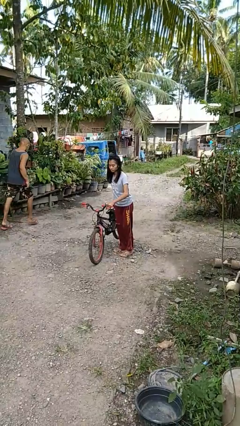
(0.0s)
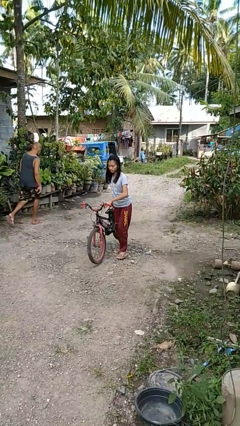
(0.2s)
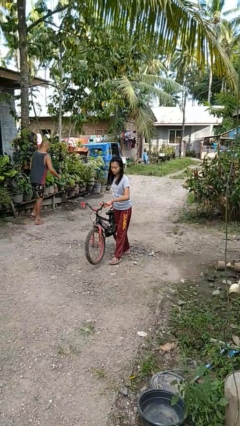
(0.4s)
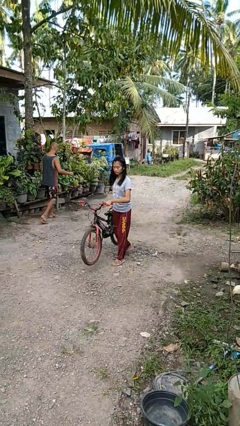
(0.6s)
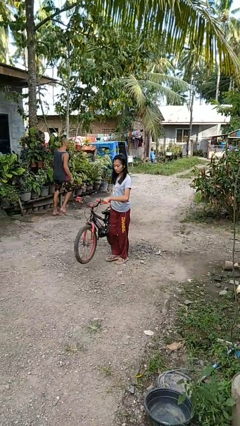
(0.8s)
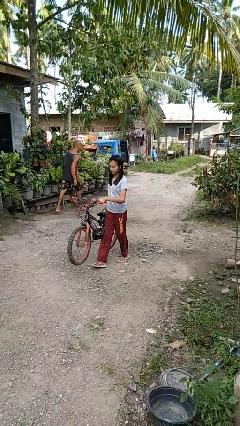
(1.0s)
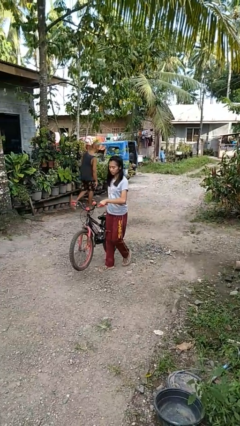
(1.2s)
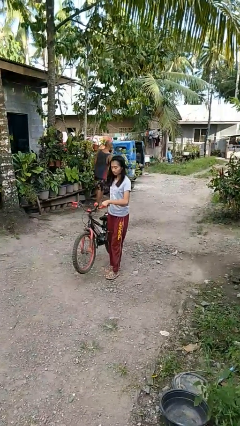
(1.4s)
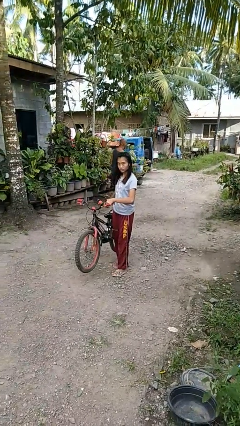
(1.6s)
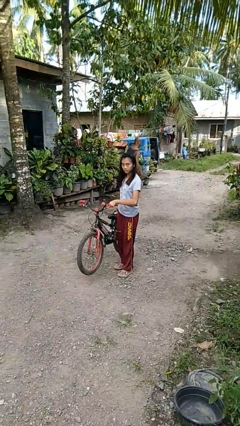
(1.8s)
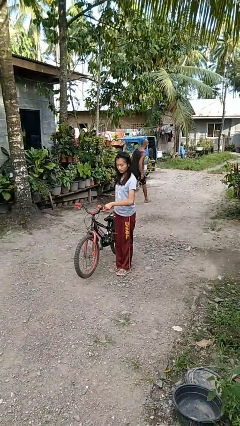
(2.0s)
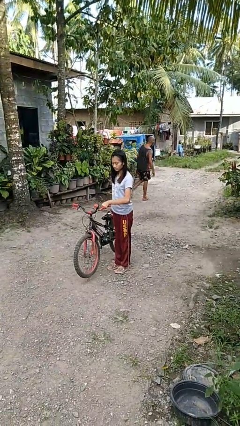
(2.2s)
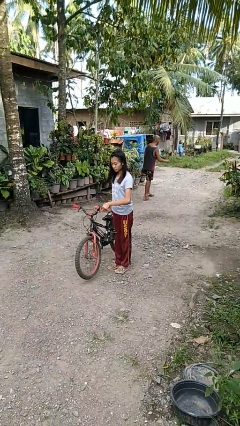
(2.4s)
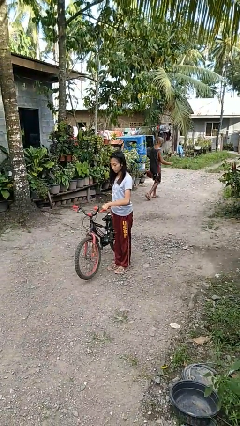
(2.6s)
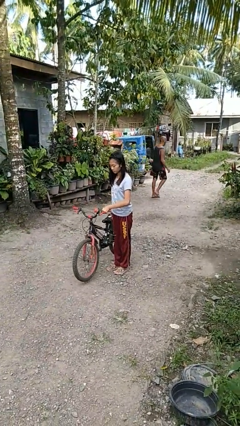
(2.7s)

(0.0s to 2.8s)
person carries bicycle

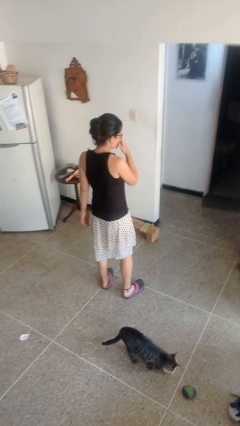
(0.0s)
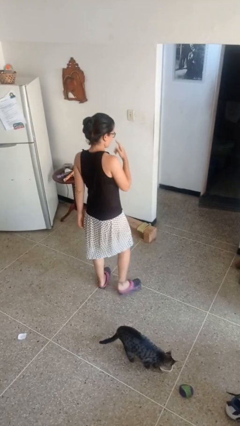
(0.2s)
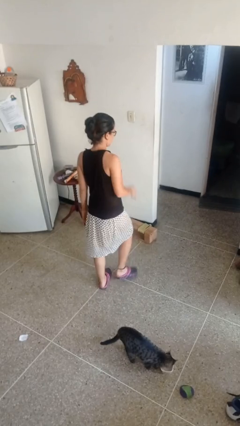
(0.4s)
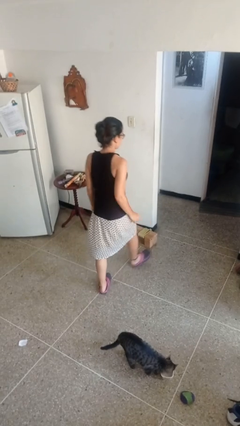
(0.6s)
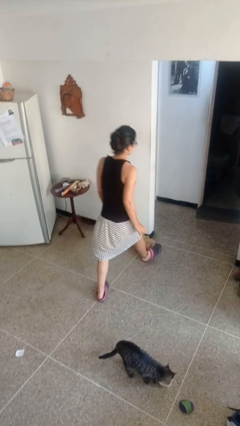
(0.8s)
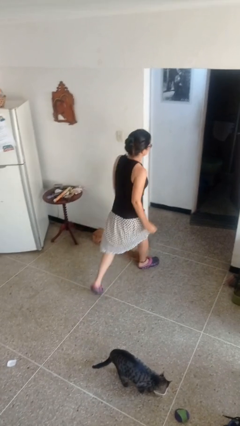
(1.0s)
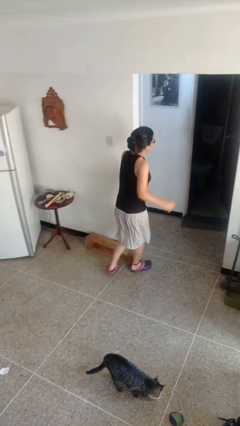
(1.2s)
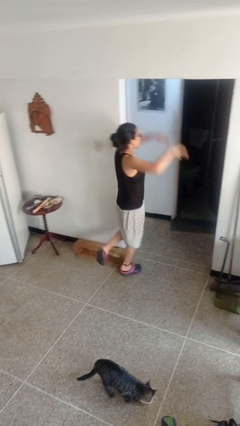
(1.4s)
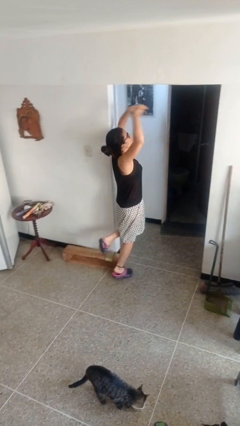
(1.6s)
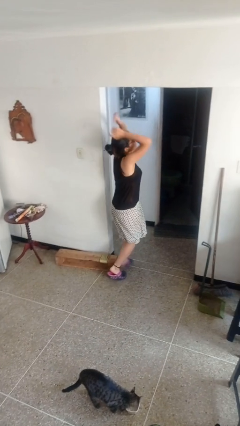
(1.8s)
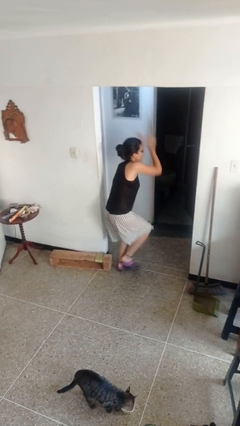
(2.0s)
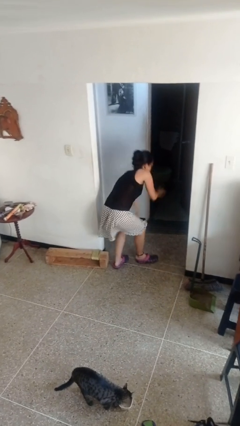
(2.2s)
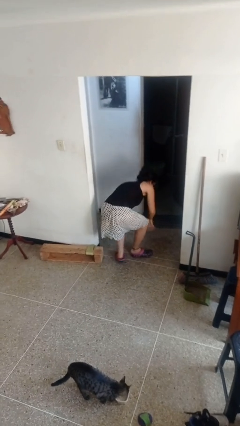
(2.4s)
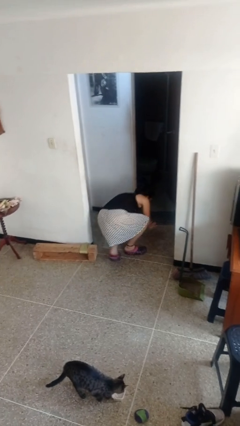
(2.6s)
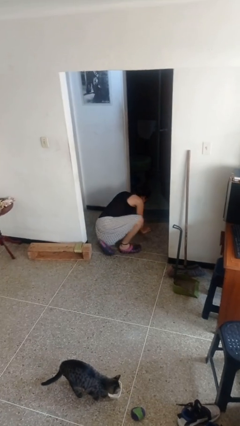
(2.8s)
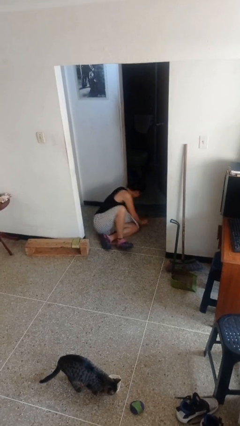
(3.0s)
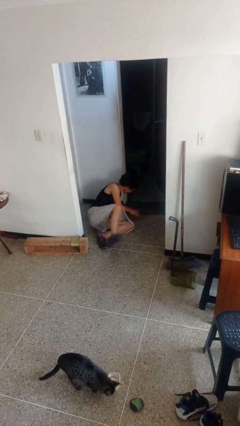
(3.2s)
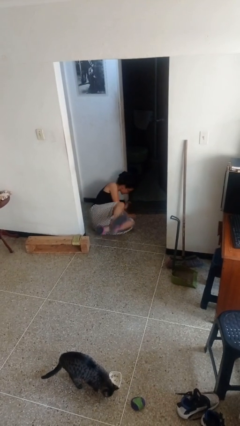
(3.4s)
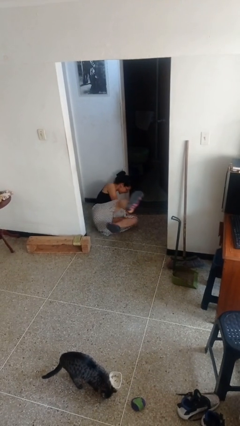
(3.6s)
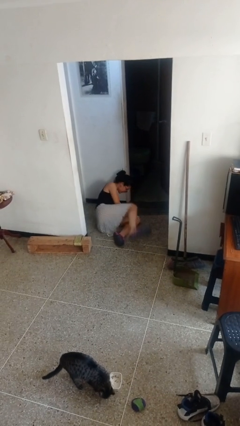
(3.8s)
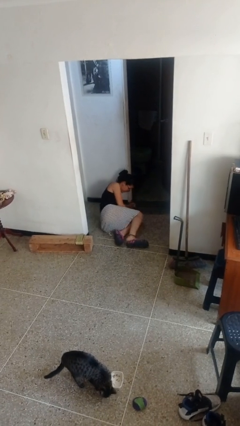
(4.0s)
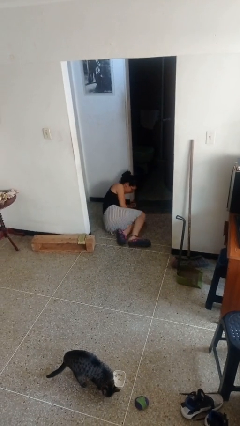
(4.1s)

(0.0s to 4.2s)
person trips on object on floor

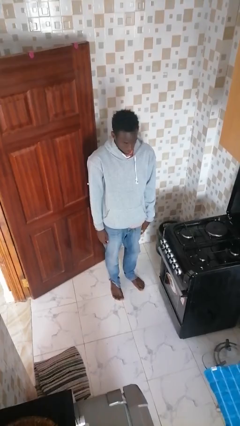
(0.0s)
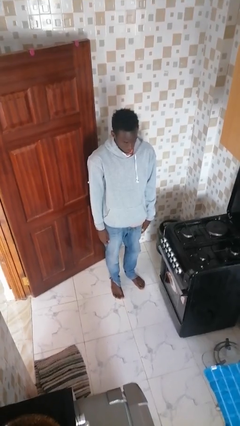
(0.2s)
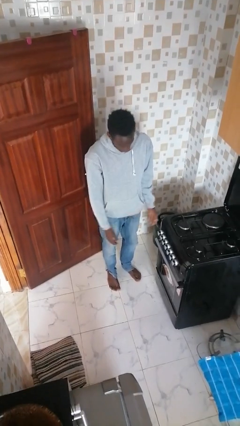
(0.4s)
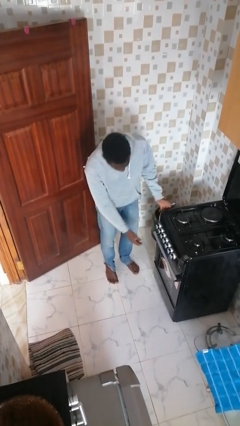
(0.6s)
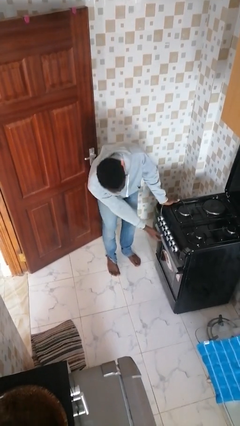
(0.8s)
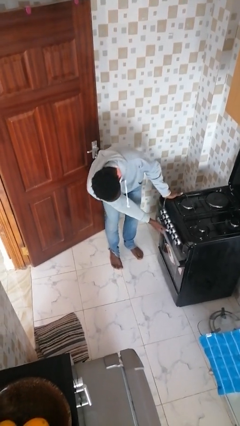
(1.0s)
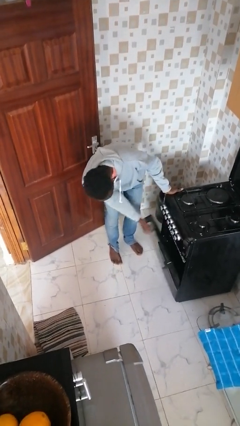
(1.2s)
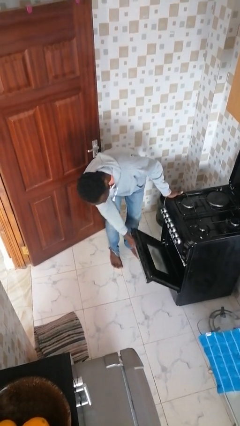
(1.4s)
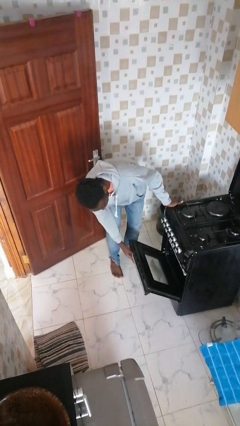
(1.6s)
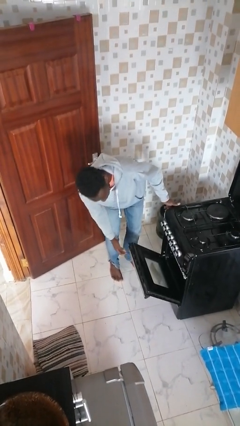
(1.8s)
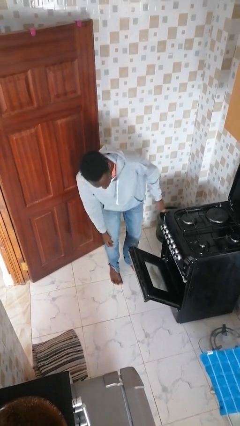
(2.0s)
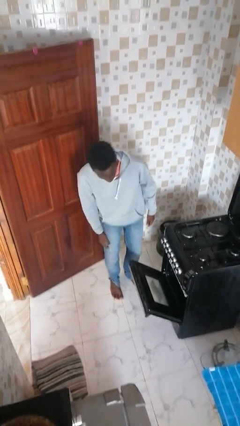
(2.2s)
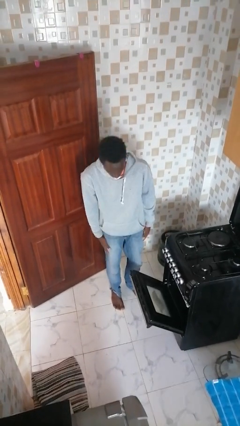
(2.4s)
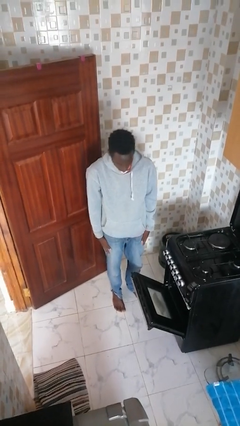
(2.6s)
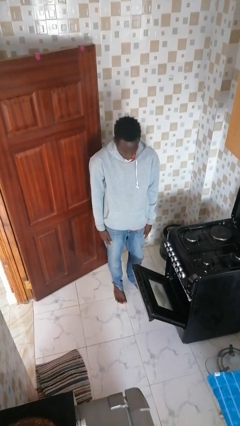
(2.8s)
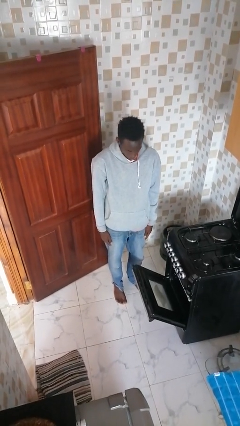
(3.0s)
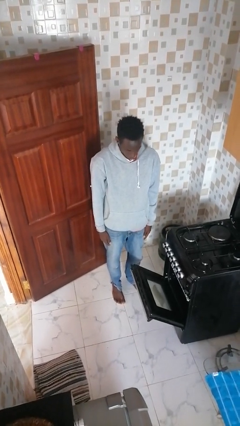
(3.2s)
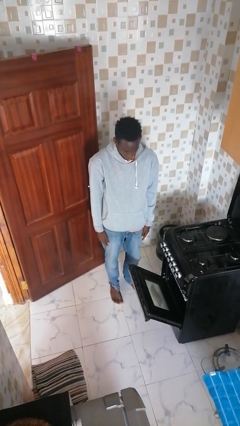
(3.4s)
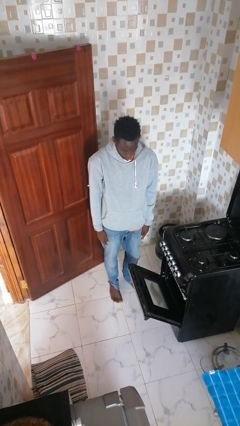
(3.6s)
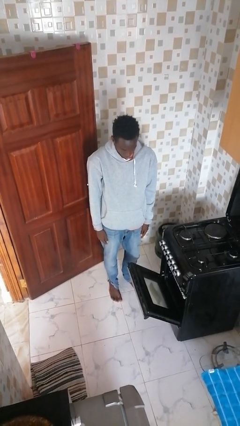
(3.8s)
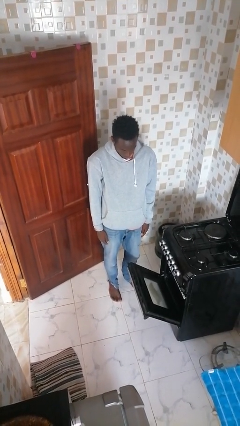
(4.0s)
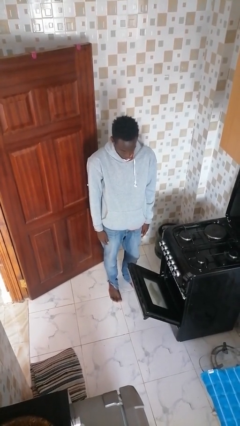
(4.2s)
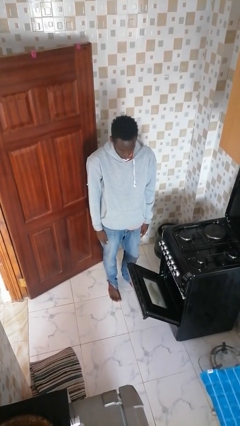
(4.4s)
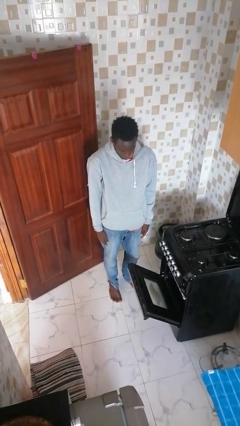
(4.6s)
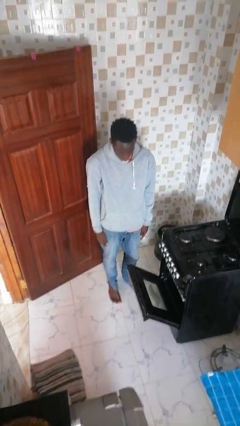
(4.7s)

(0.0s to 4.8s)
person opens oven door

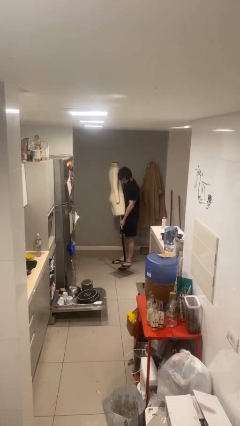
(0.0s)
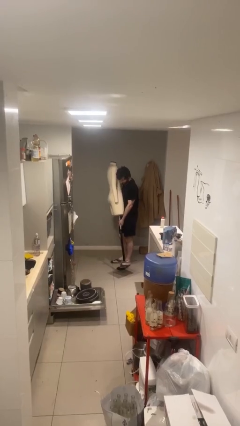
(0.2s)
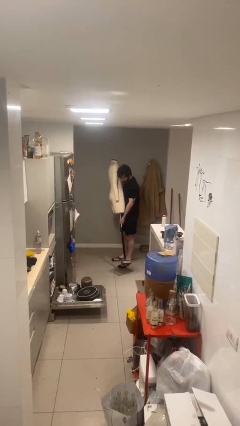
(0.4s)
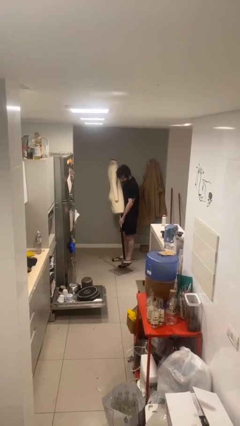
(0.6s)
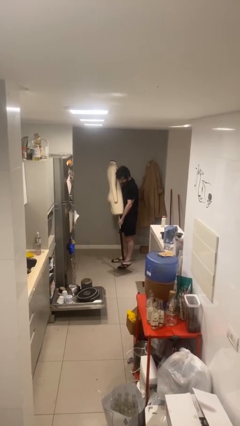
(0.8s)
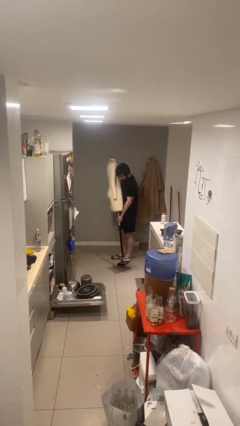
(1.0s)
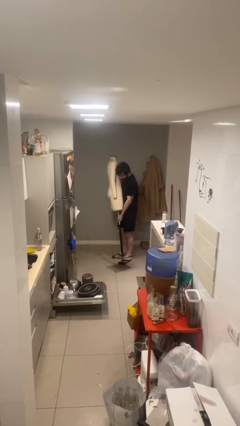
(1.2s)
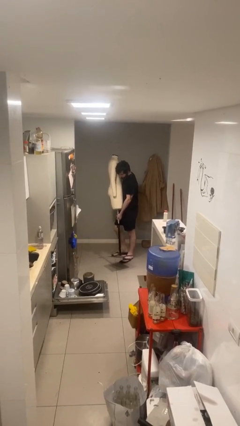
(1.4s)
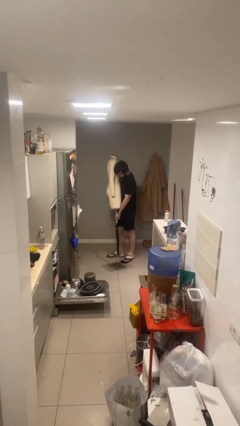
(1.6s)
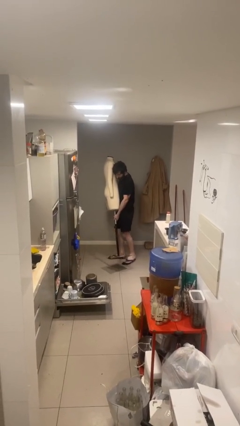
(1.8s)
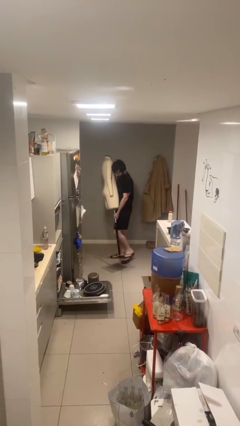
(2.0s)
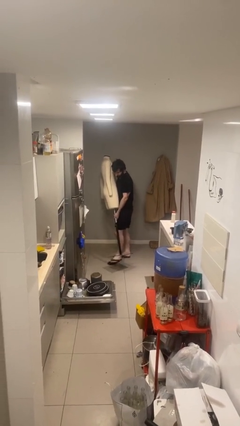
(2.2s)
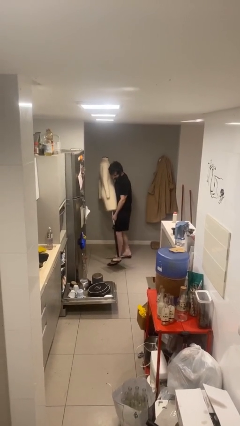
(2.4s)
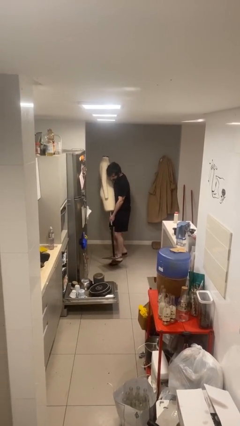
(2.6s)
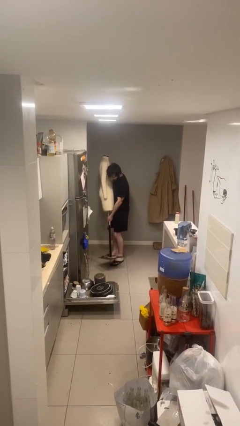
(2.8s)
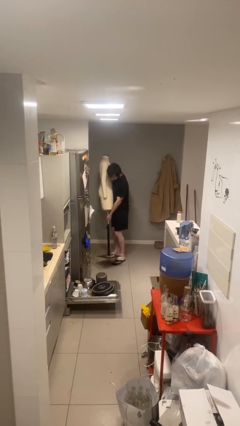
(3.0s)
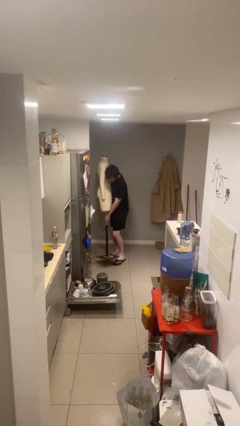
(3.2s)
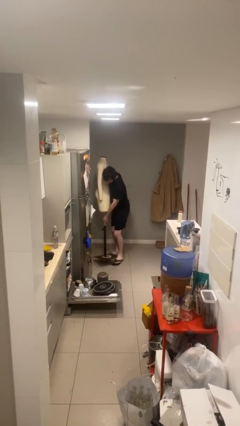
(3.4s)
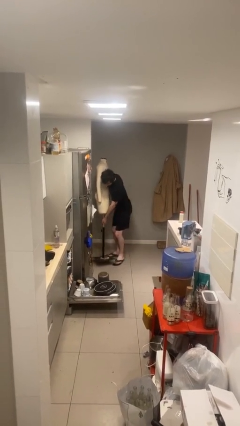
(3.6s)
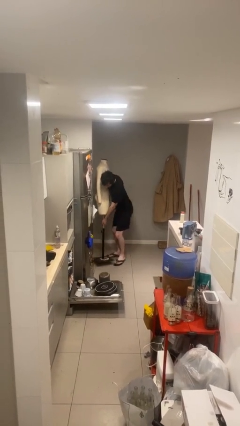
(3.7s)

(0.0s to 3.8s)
person carries heavy object

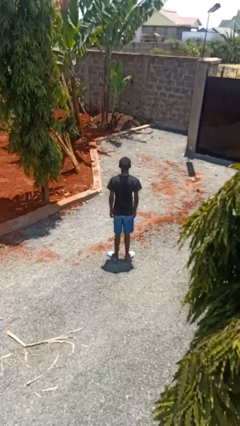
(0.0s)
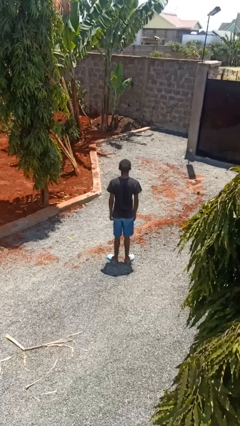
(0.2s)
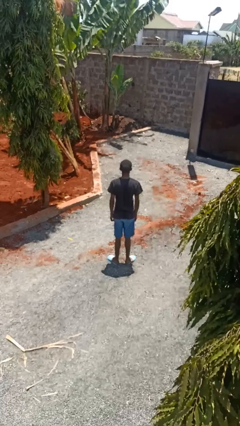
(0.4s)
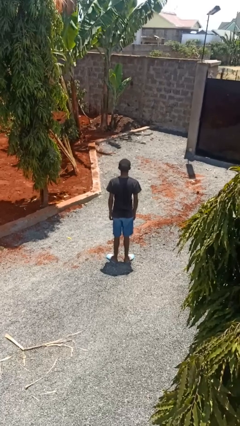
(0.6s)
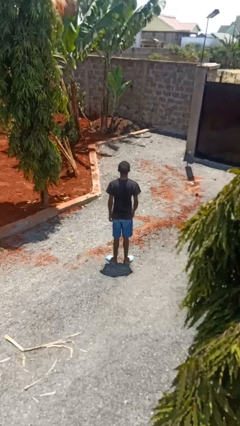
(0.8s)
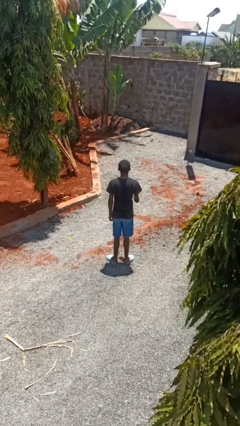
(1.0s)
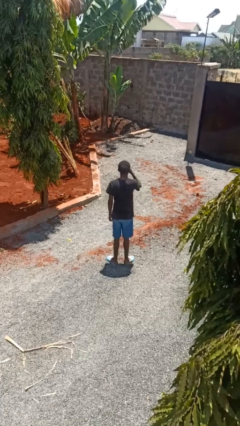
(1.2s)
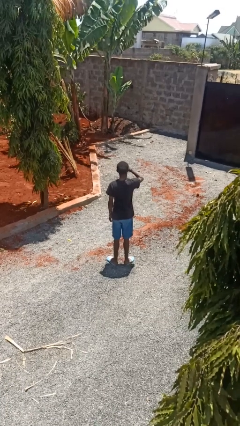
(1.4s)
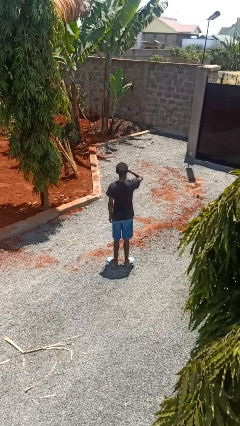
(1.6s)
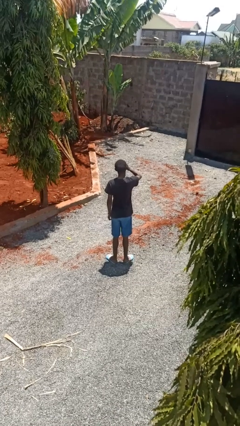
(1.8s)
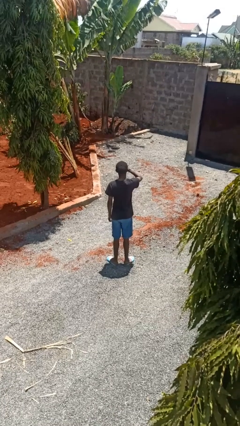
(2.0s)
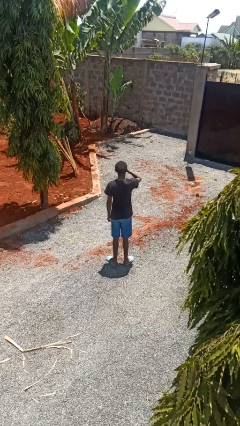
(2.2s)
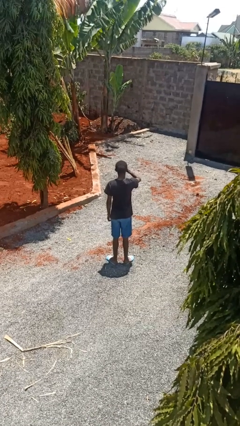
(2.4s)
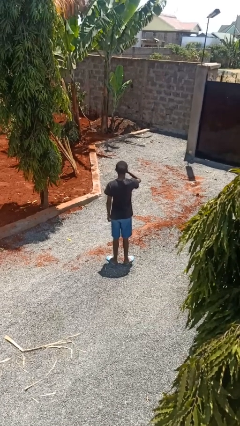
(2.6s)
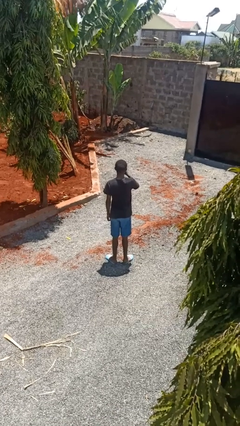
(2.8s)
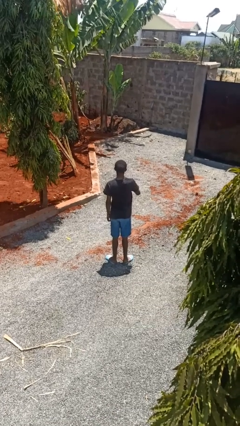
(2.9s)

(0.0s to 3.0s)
person rubs eyes
